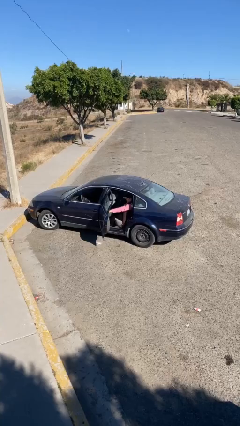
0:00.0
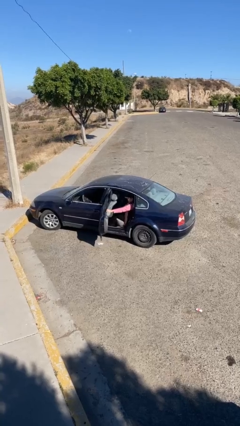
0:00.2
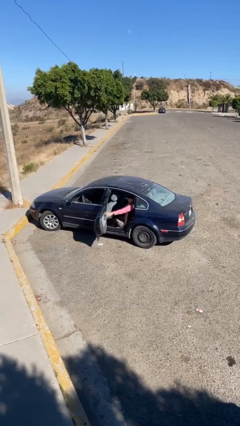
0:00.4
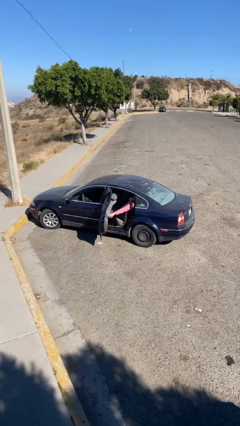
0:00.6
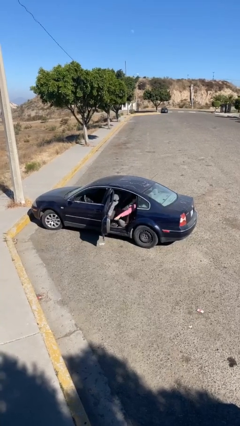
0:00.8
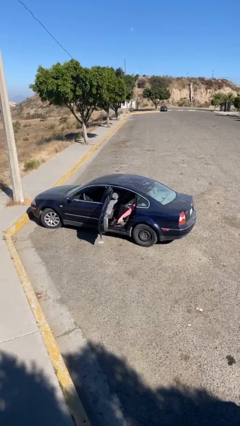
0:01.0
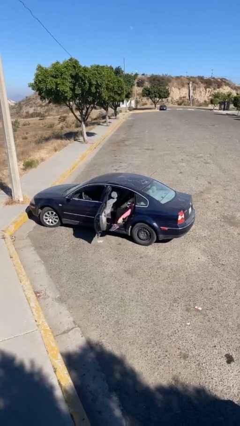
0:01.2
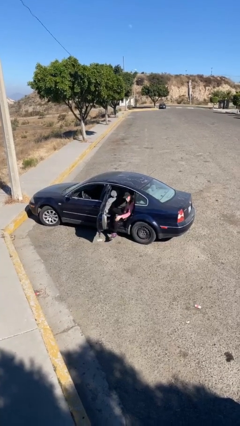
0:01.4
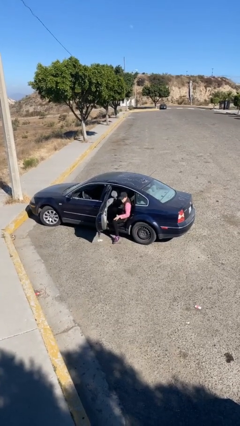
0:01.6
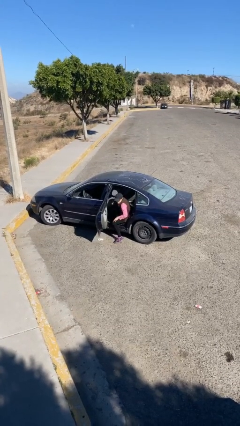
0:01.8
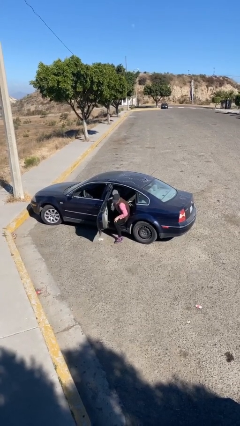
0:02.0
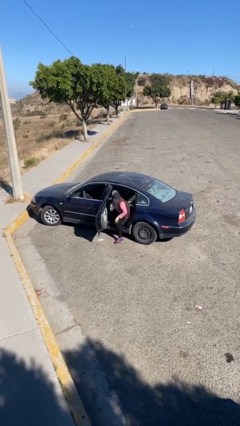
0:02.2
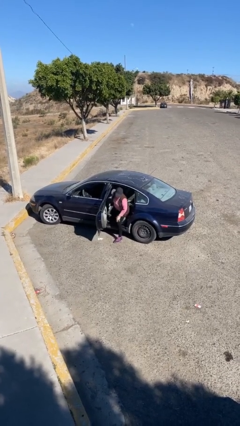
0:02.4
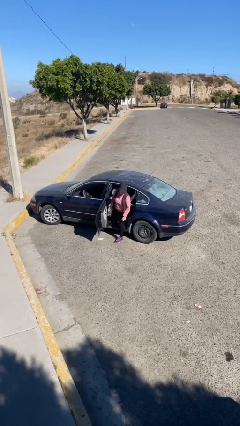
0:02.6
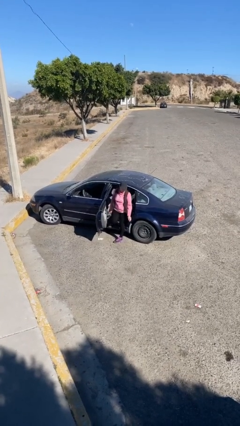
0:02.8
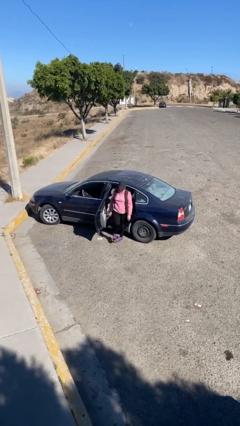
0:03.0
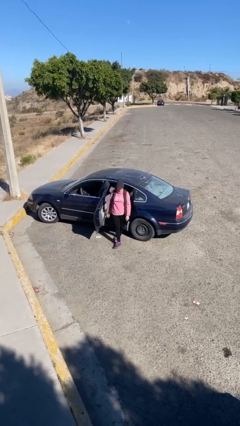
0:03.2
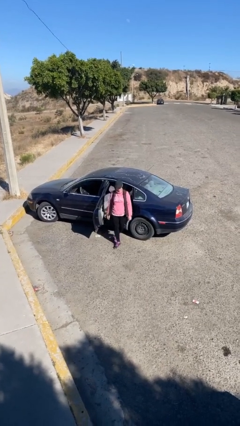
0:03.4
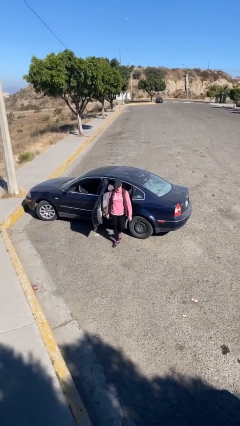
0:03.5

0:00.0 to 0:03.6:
person exits car

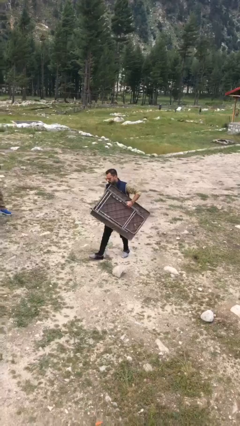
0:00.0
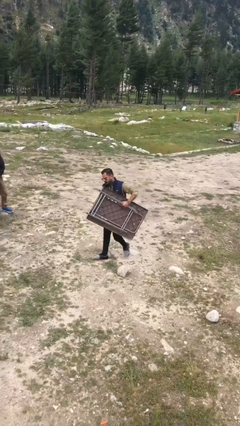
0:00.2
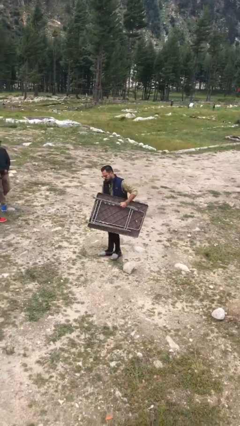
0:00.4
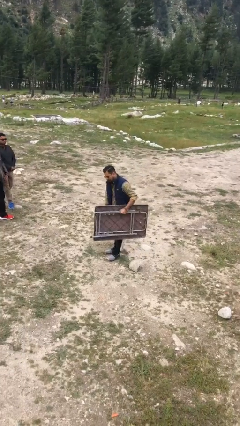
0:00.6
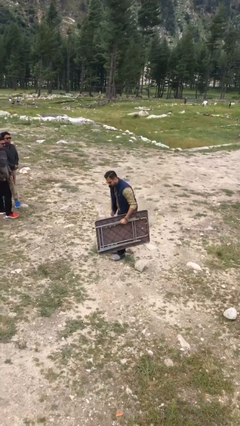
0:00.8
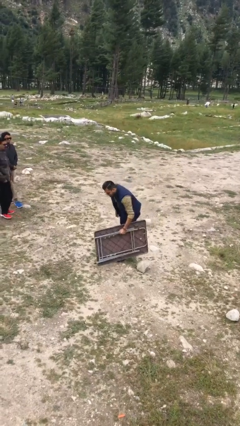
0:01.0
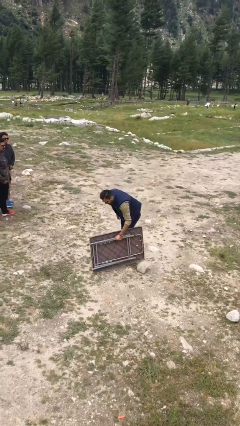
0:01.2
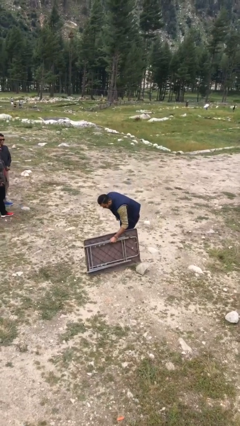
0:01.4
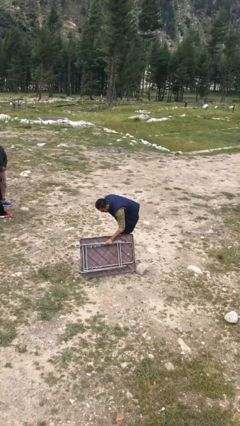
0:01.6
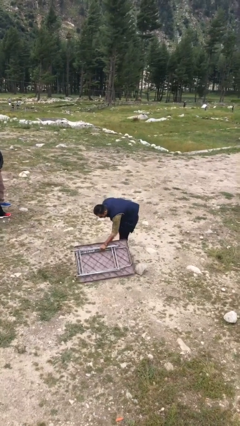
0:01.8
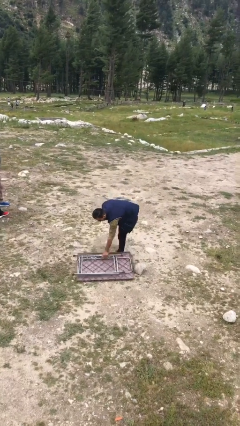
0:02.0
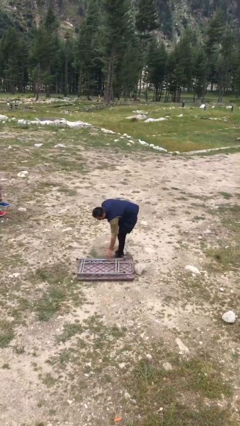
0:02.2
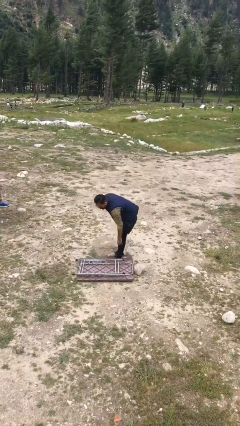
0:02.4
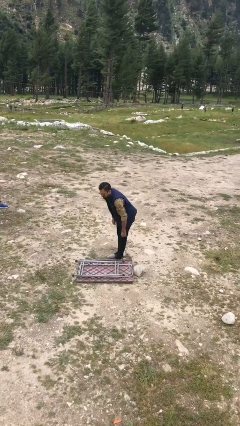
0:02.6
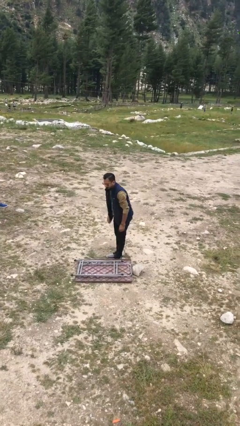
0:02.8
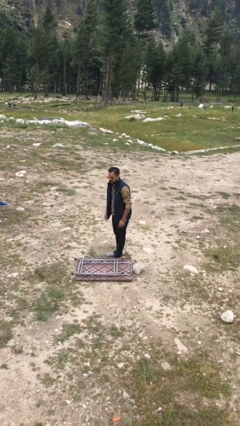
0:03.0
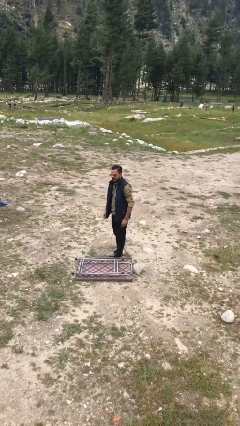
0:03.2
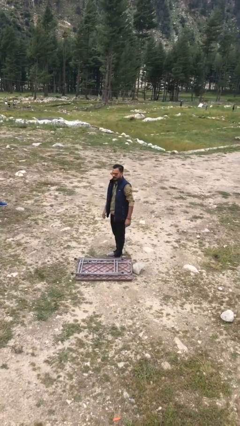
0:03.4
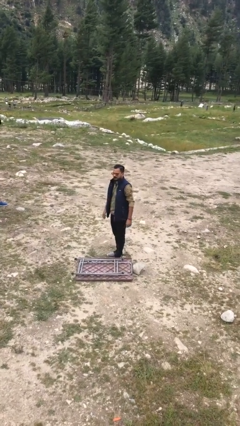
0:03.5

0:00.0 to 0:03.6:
person puts down object on floor

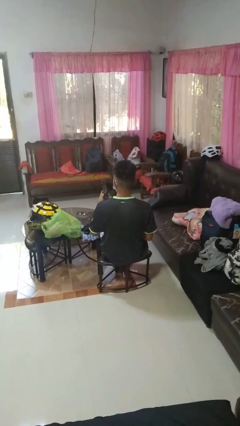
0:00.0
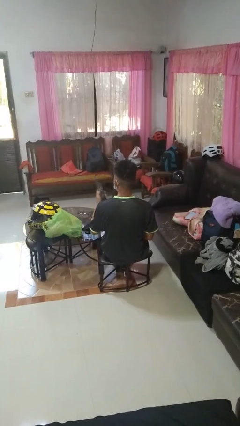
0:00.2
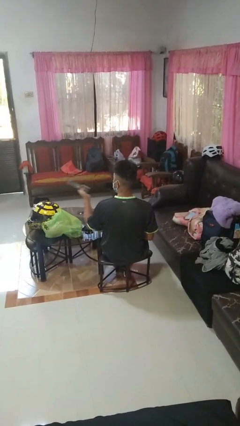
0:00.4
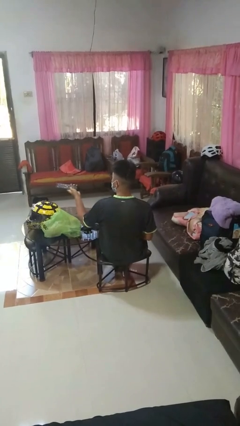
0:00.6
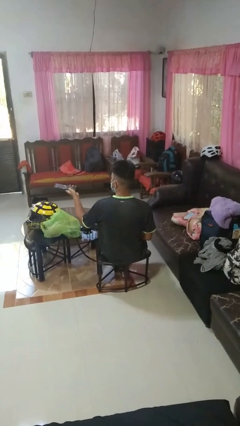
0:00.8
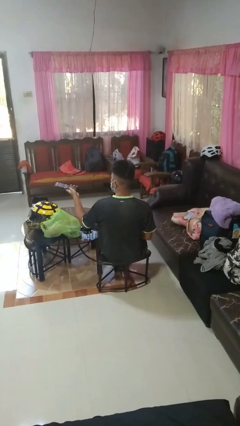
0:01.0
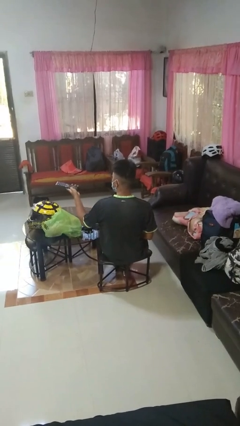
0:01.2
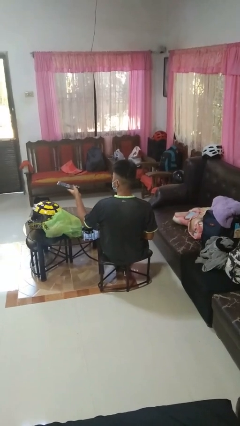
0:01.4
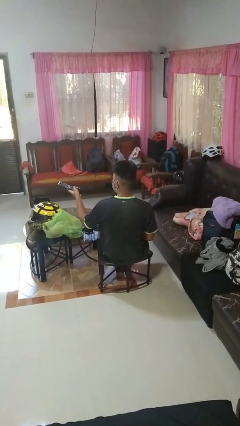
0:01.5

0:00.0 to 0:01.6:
person uses television remote

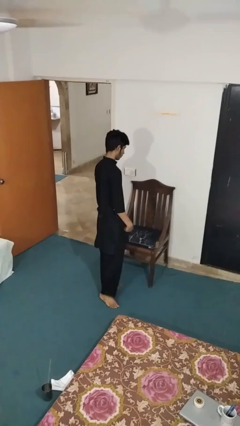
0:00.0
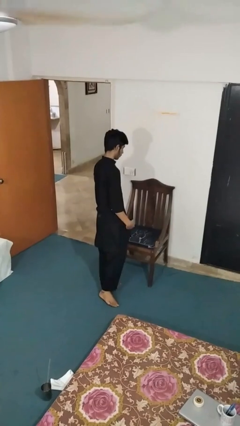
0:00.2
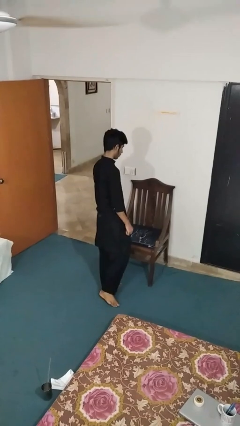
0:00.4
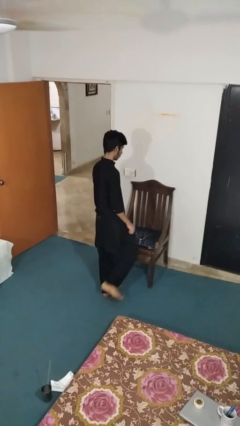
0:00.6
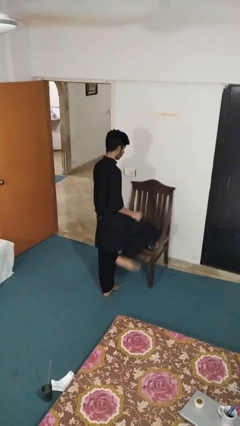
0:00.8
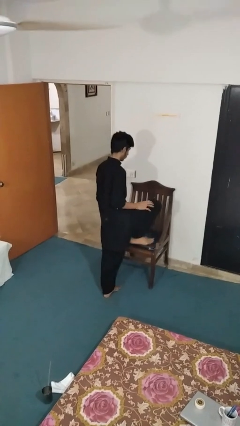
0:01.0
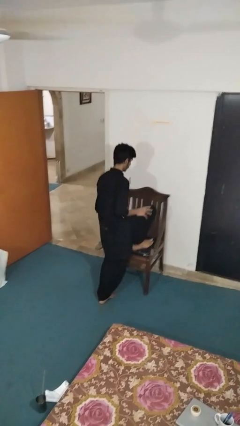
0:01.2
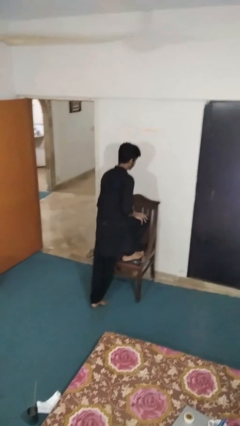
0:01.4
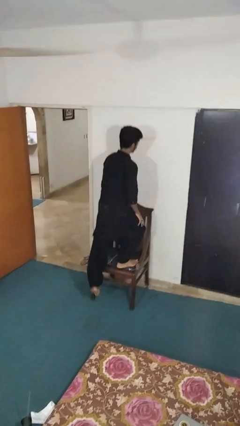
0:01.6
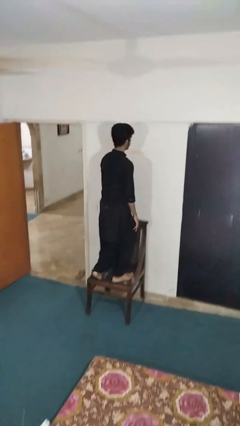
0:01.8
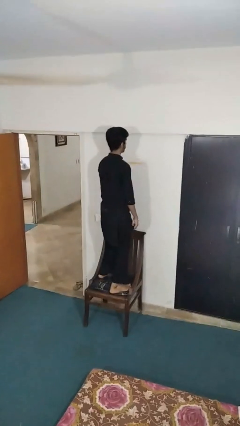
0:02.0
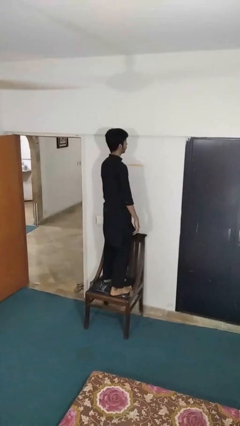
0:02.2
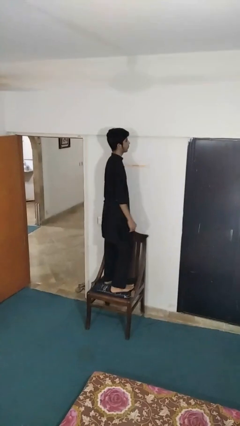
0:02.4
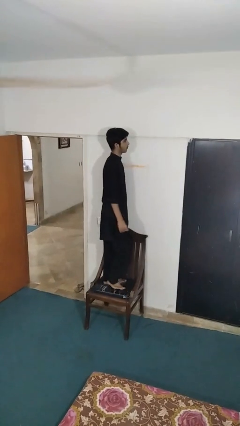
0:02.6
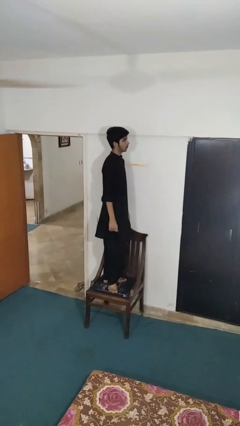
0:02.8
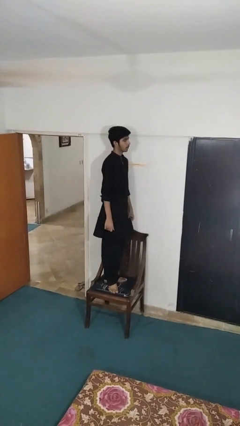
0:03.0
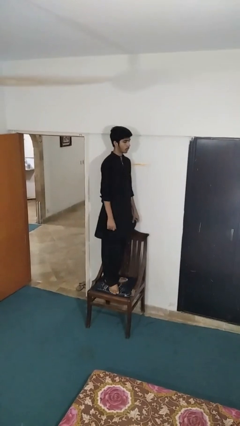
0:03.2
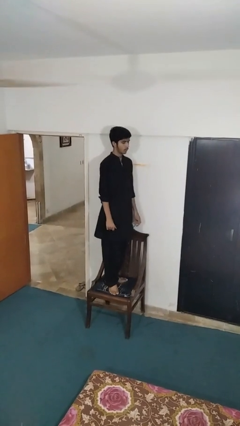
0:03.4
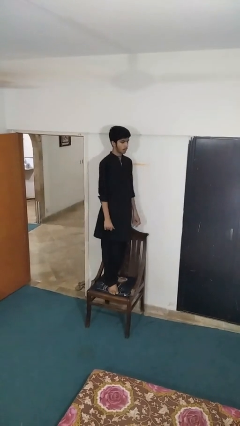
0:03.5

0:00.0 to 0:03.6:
person climbs on chair

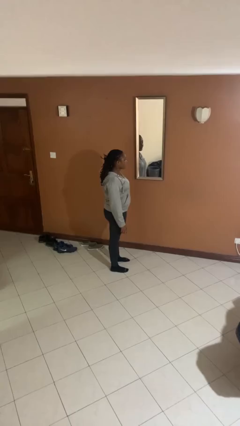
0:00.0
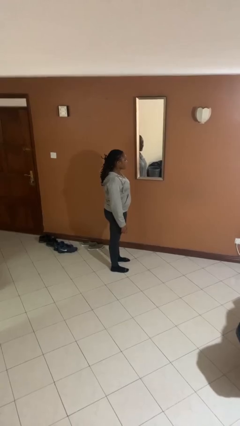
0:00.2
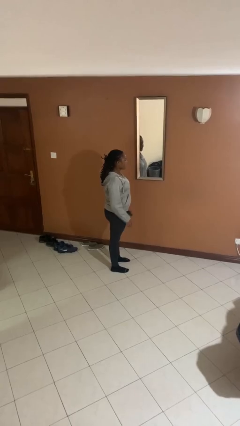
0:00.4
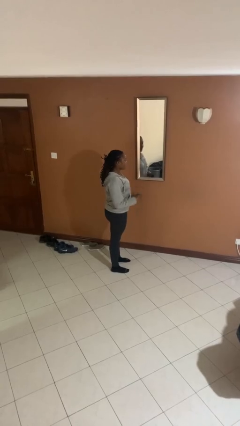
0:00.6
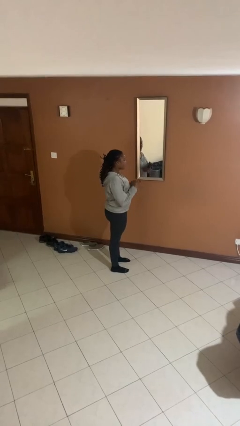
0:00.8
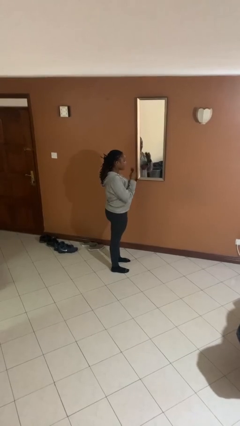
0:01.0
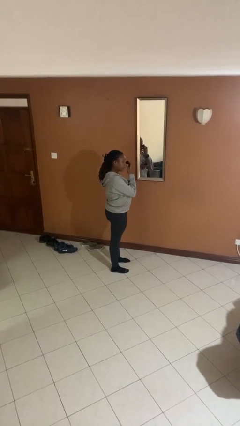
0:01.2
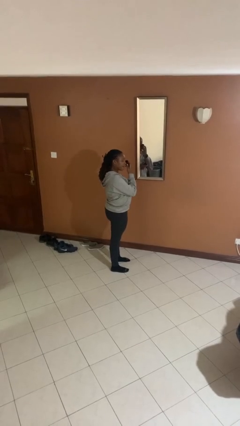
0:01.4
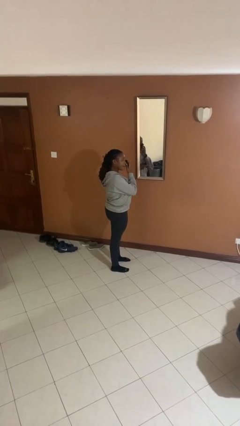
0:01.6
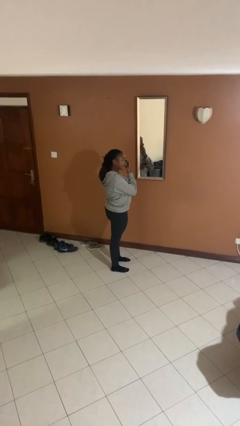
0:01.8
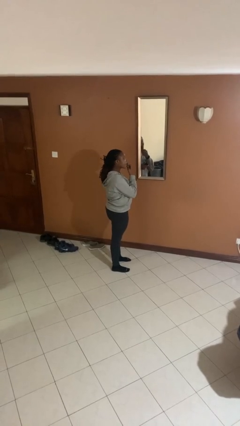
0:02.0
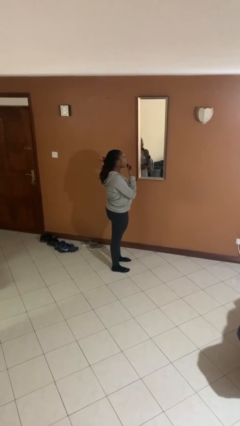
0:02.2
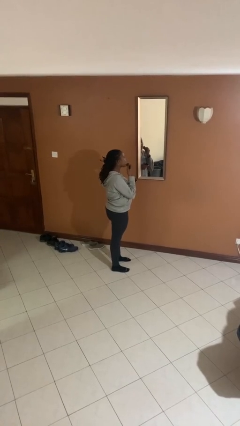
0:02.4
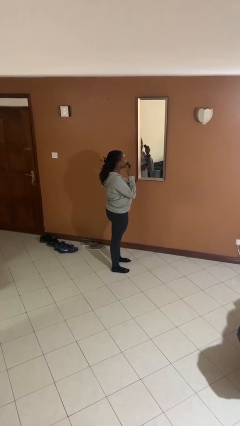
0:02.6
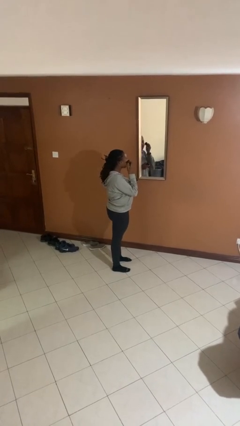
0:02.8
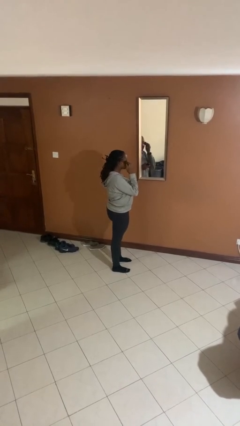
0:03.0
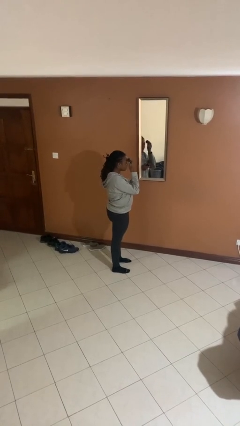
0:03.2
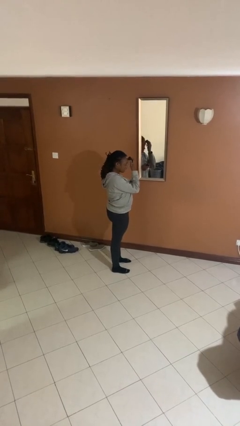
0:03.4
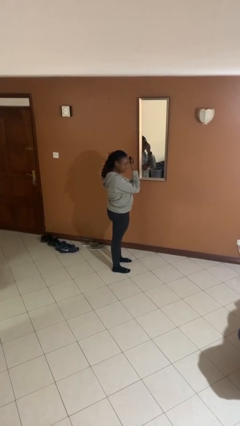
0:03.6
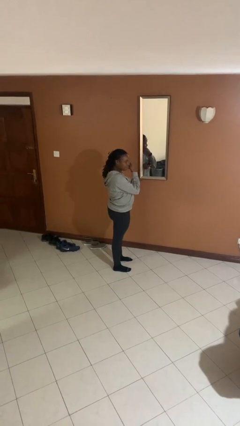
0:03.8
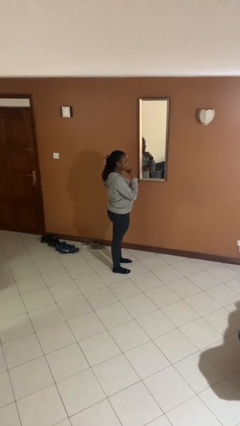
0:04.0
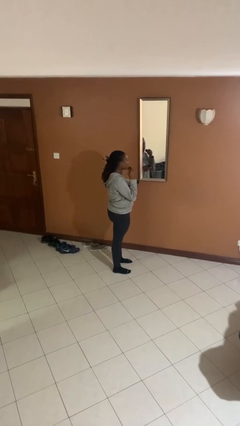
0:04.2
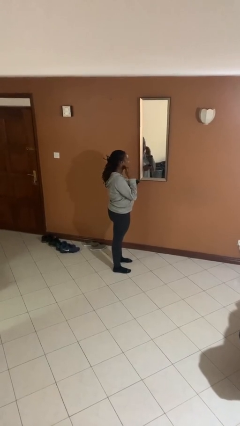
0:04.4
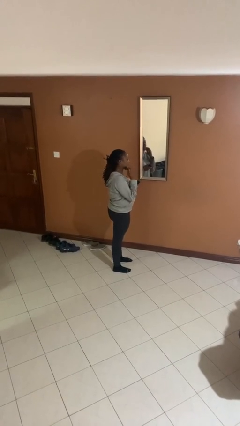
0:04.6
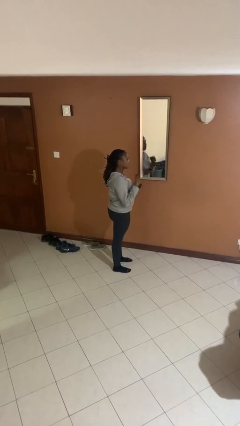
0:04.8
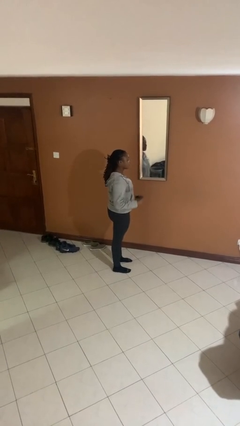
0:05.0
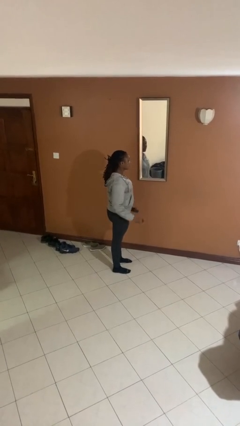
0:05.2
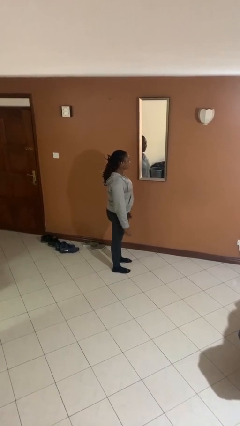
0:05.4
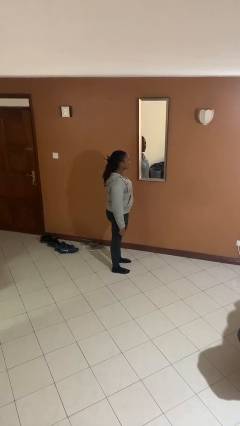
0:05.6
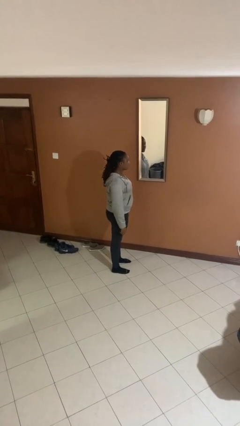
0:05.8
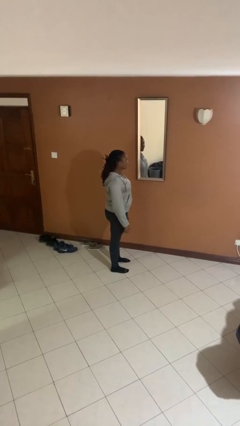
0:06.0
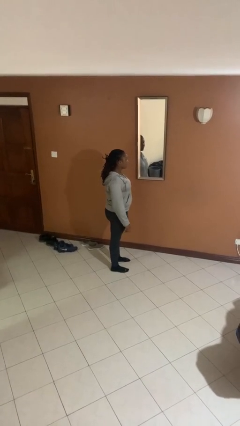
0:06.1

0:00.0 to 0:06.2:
person applies foundation makeup
